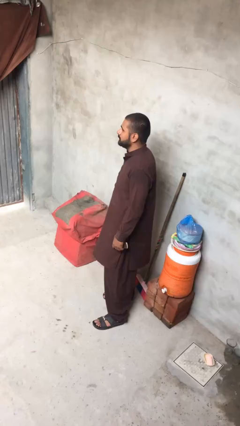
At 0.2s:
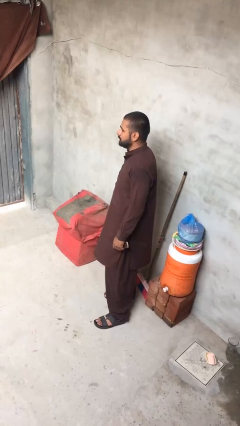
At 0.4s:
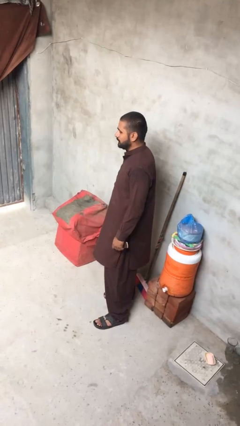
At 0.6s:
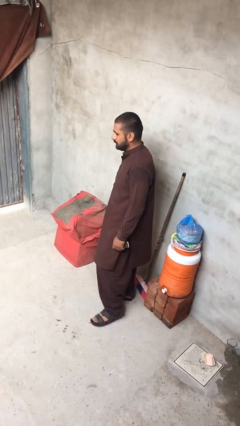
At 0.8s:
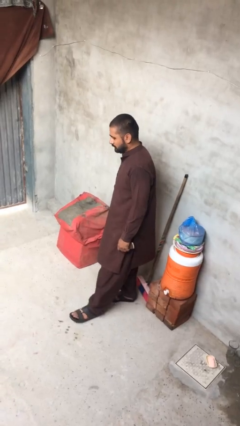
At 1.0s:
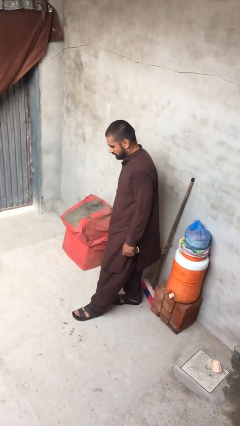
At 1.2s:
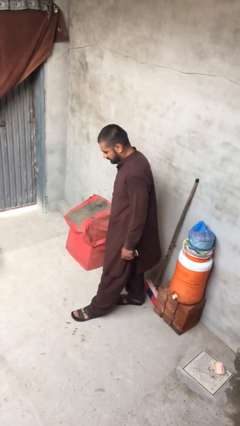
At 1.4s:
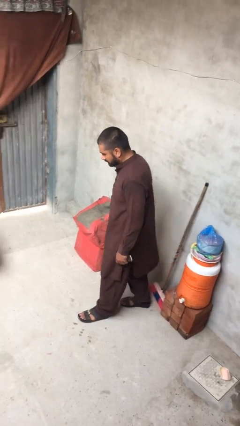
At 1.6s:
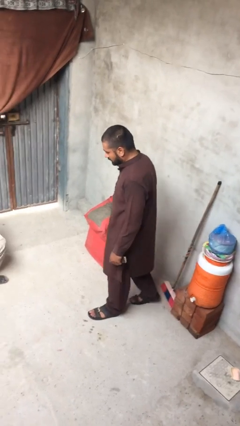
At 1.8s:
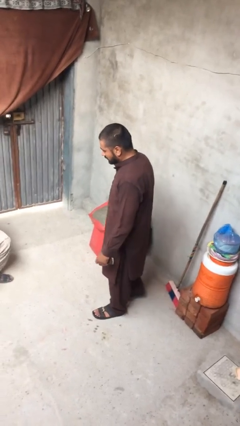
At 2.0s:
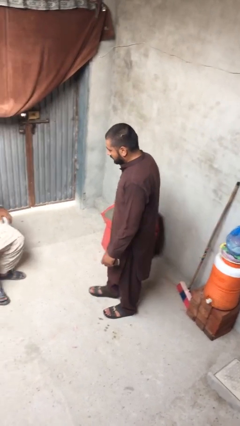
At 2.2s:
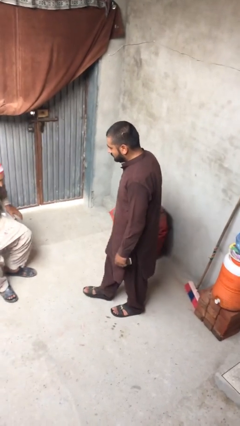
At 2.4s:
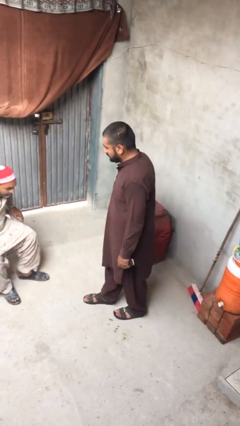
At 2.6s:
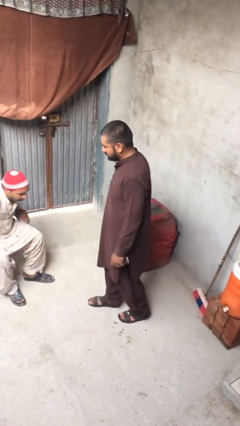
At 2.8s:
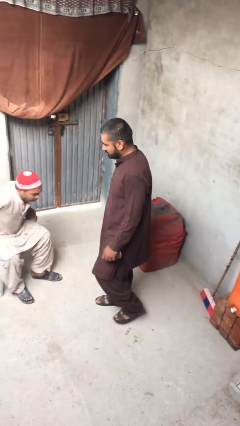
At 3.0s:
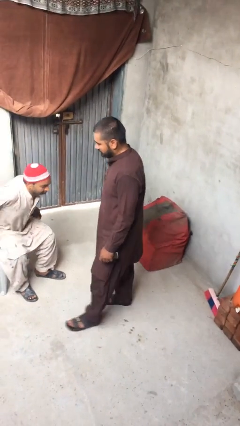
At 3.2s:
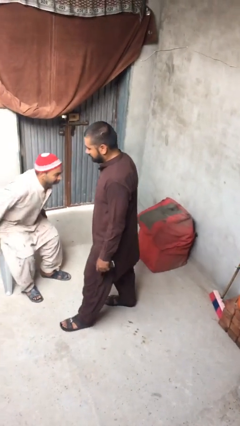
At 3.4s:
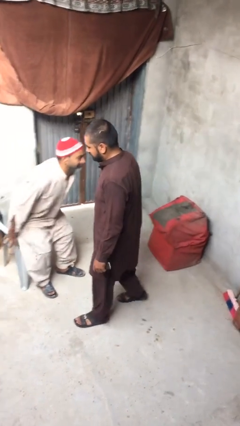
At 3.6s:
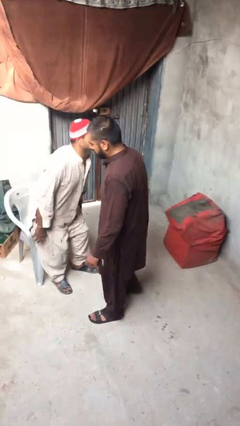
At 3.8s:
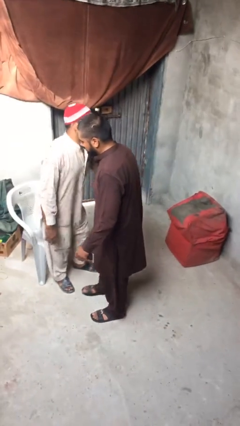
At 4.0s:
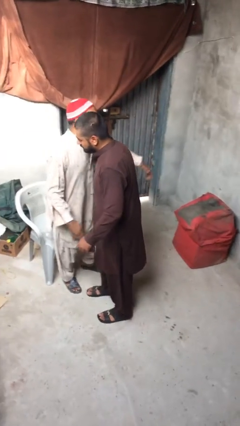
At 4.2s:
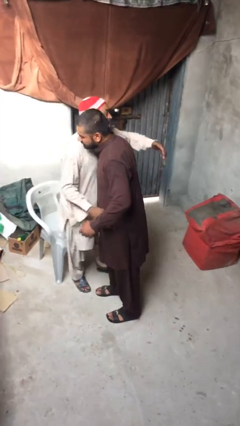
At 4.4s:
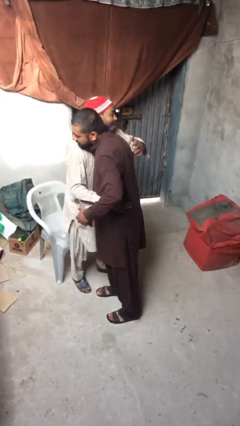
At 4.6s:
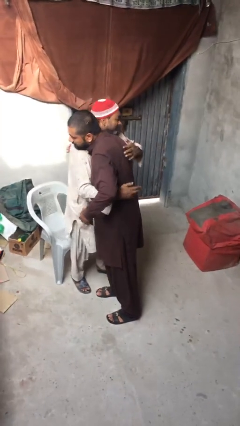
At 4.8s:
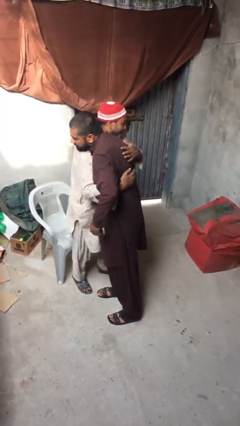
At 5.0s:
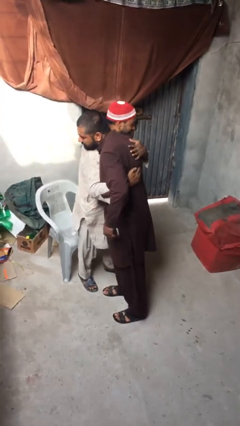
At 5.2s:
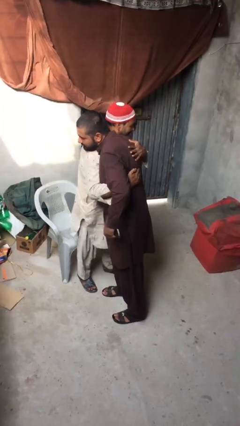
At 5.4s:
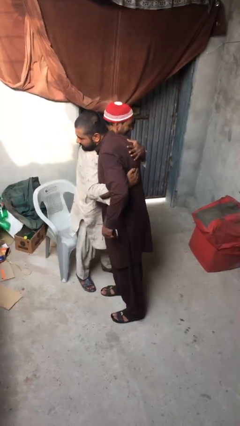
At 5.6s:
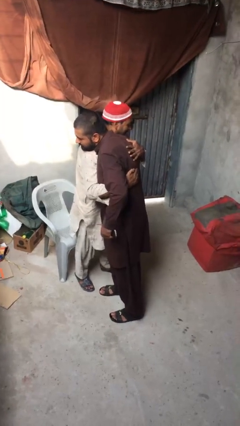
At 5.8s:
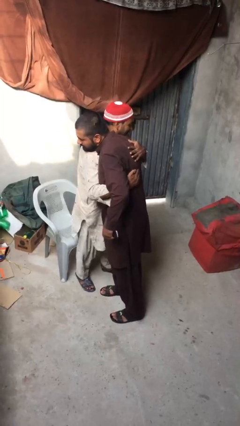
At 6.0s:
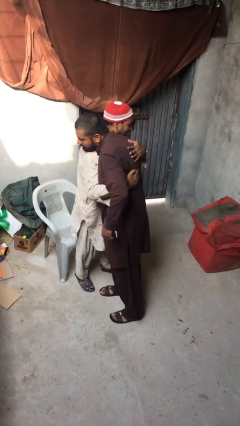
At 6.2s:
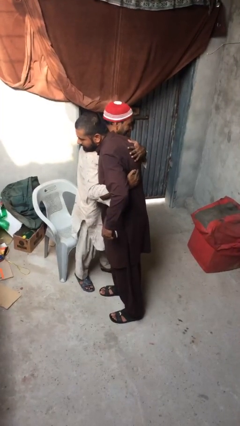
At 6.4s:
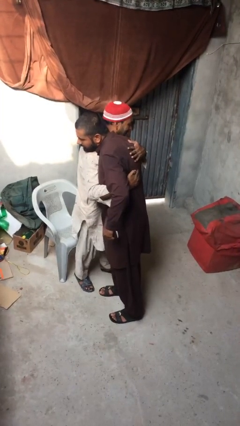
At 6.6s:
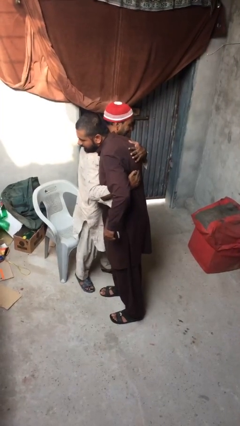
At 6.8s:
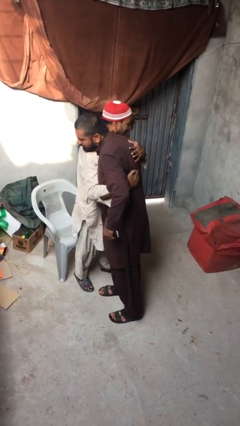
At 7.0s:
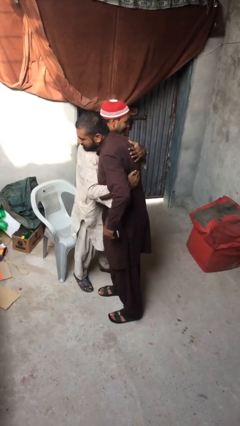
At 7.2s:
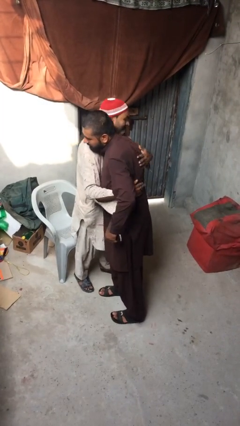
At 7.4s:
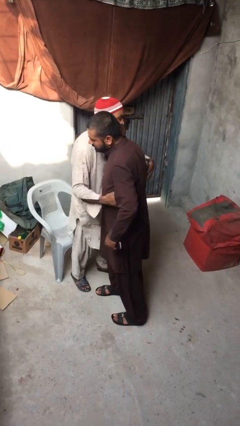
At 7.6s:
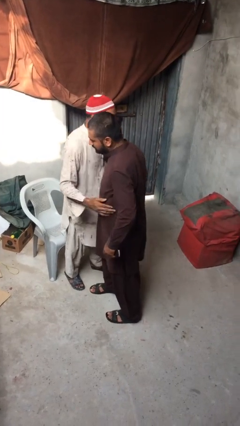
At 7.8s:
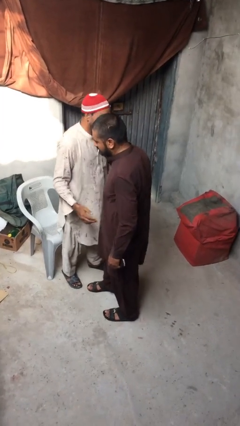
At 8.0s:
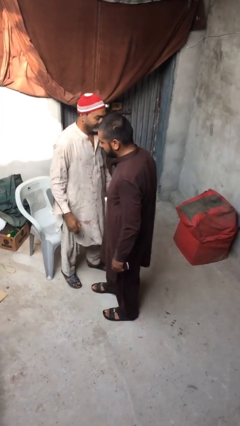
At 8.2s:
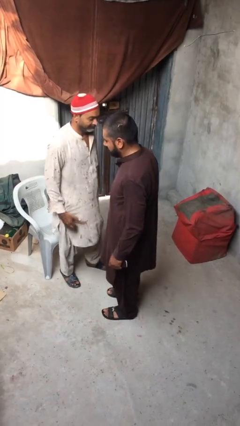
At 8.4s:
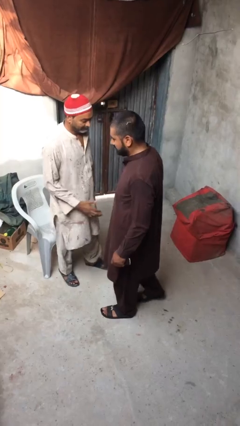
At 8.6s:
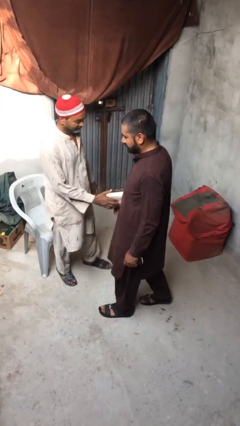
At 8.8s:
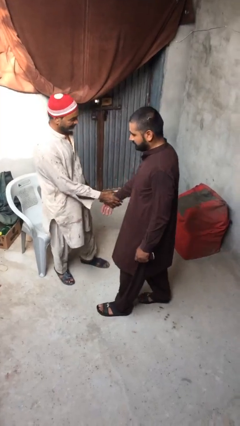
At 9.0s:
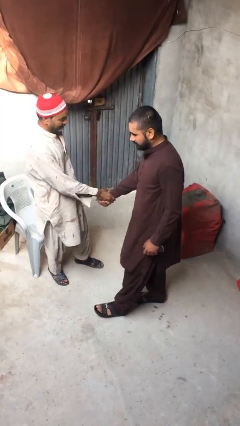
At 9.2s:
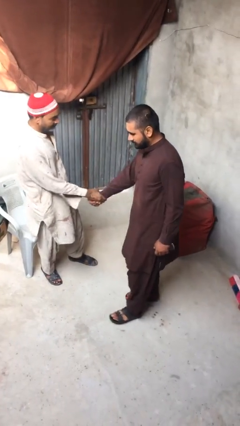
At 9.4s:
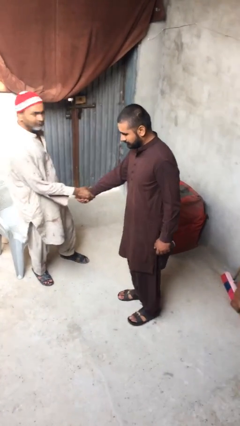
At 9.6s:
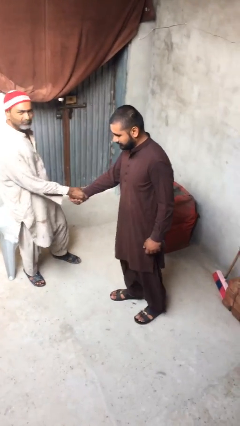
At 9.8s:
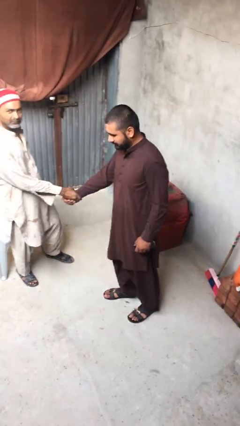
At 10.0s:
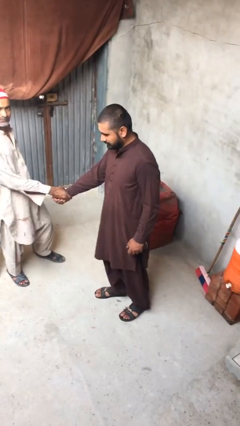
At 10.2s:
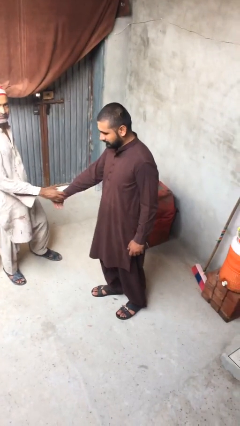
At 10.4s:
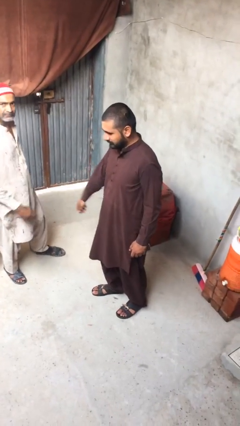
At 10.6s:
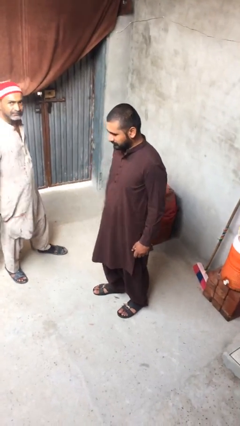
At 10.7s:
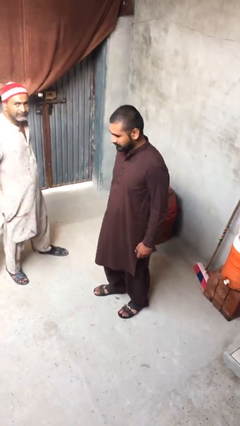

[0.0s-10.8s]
person embraces person

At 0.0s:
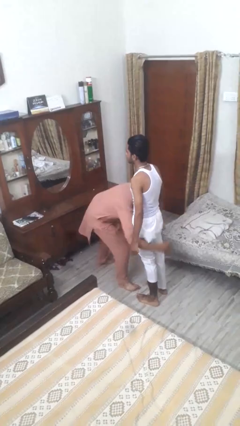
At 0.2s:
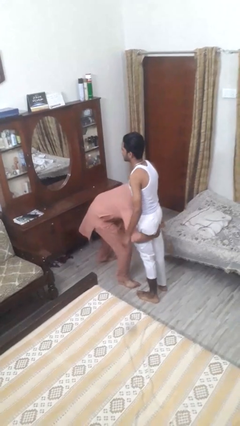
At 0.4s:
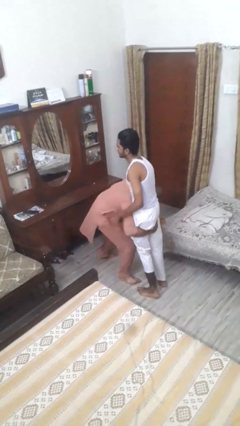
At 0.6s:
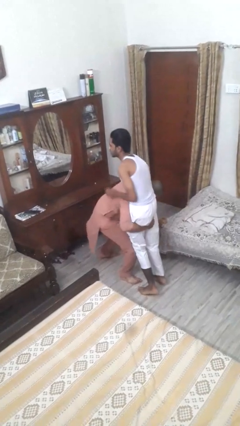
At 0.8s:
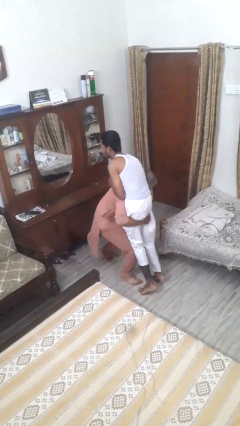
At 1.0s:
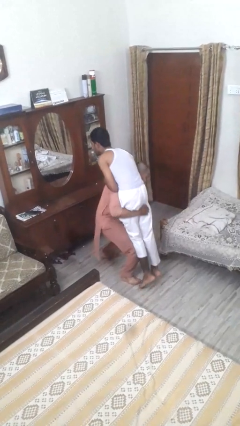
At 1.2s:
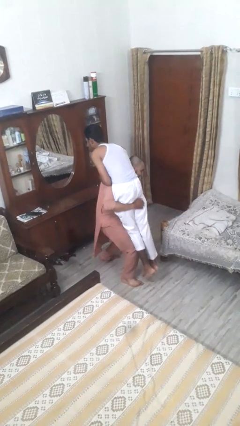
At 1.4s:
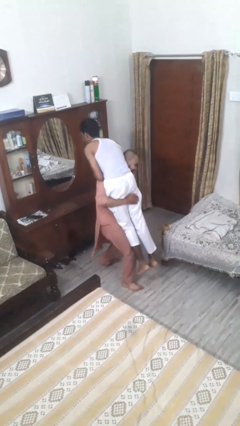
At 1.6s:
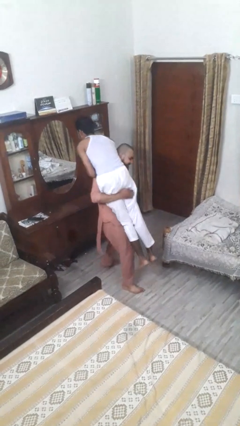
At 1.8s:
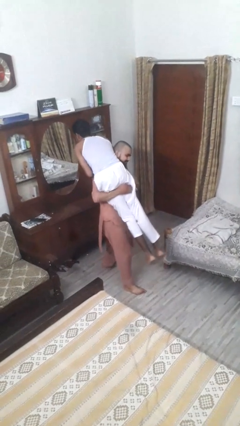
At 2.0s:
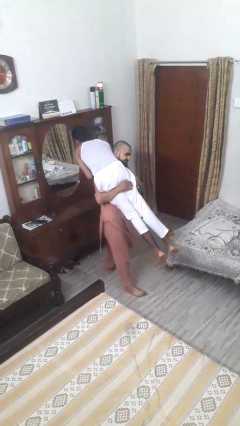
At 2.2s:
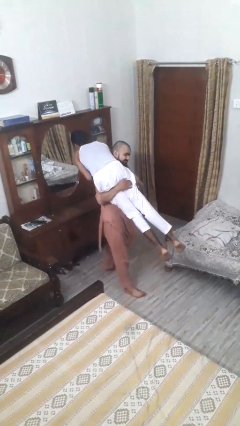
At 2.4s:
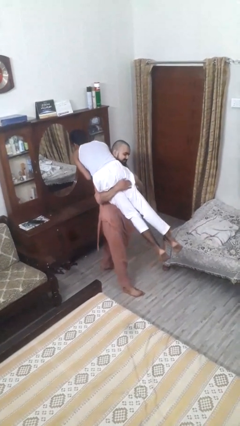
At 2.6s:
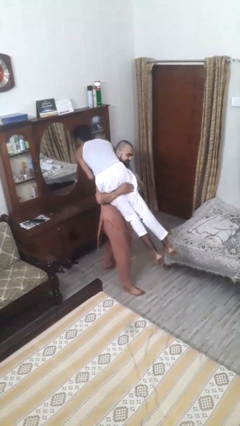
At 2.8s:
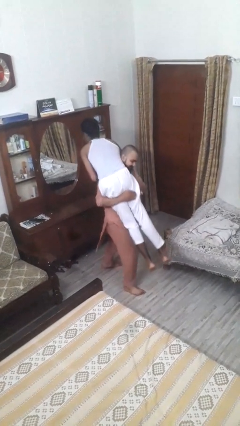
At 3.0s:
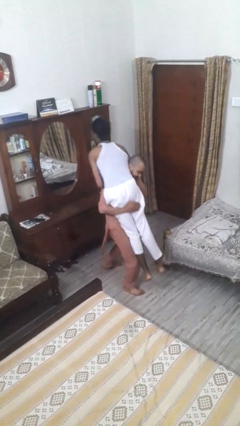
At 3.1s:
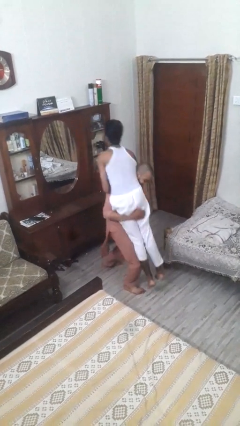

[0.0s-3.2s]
person carries person over shoulder

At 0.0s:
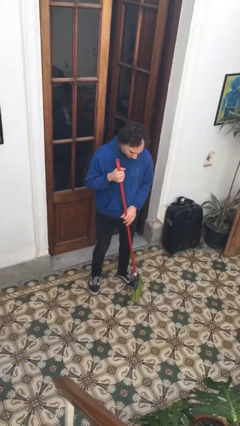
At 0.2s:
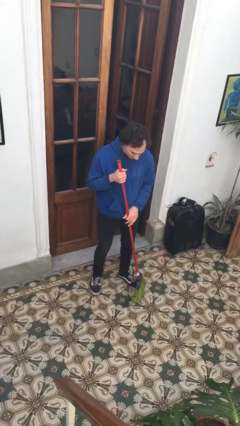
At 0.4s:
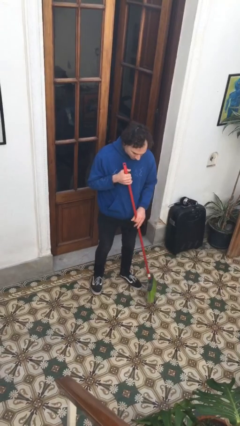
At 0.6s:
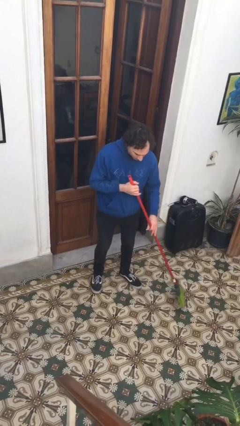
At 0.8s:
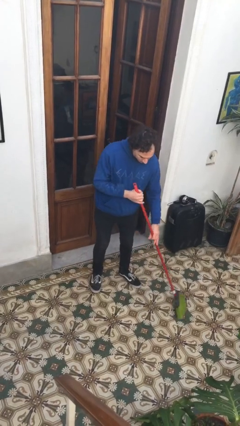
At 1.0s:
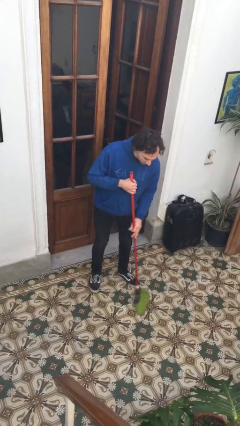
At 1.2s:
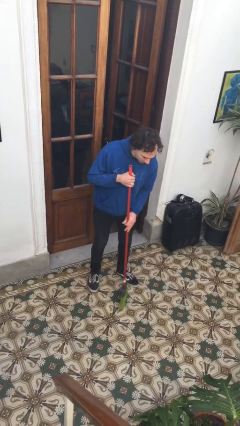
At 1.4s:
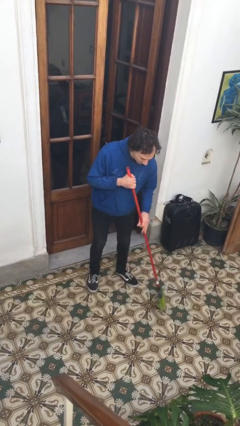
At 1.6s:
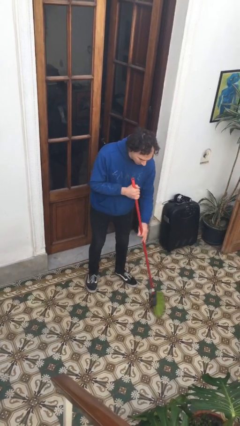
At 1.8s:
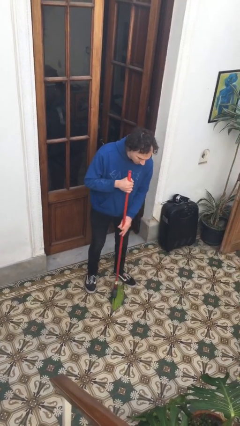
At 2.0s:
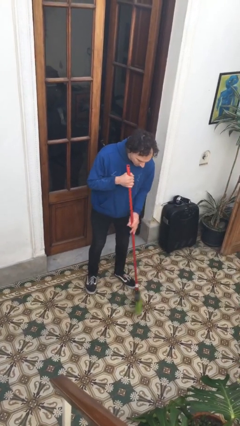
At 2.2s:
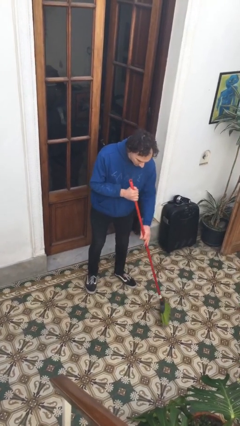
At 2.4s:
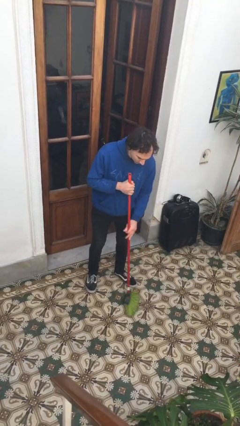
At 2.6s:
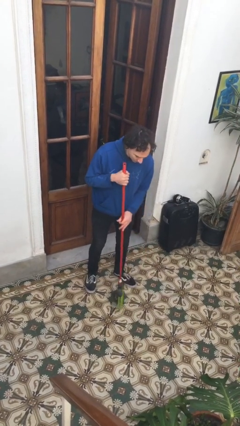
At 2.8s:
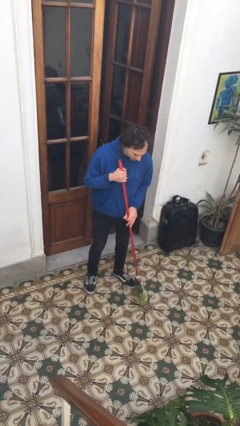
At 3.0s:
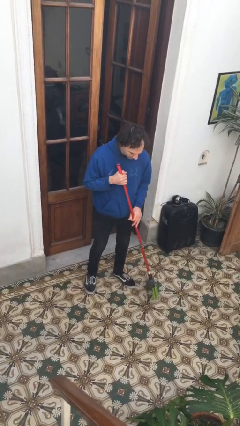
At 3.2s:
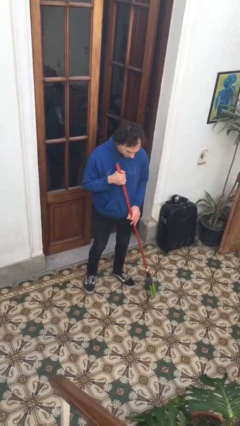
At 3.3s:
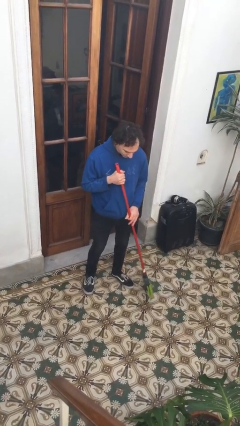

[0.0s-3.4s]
person sweeps floor

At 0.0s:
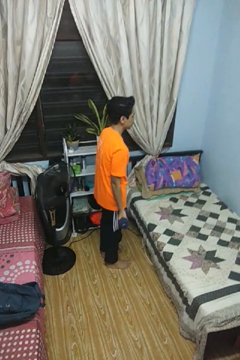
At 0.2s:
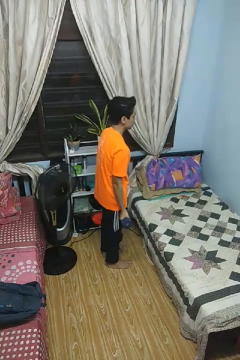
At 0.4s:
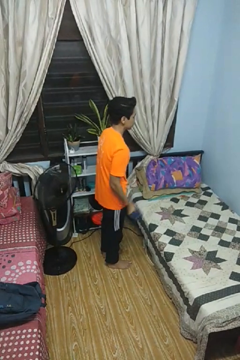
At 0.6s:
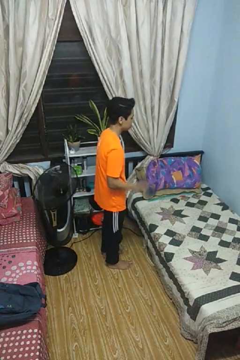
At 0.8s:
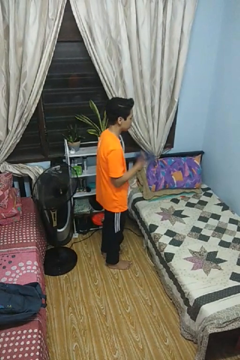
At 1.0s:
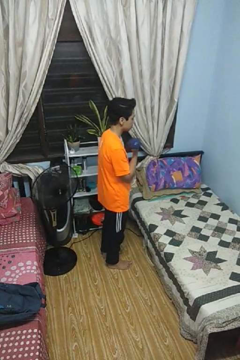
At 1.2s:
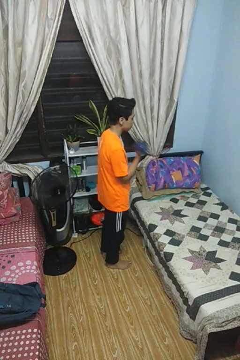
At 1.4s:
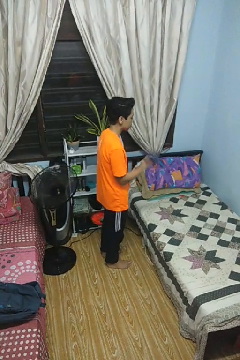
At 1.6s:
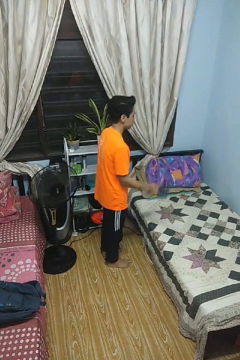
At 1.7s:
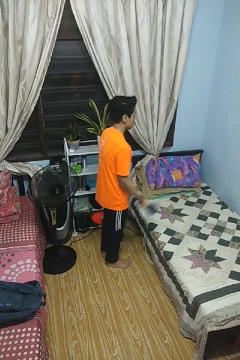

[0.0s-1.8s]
person lifts dumbbells
